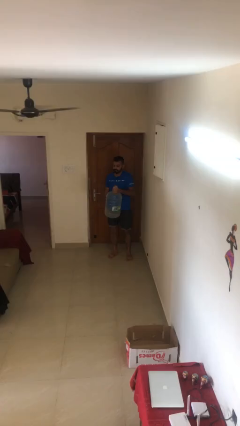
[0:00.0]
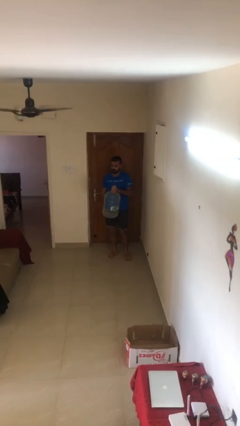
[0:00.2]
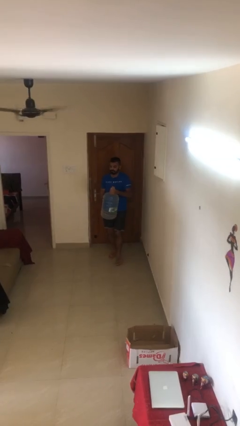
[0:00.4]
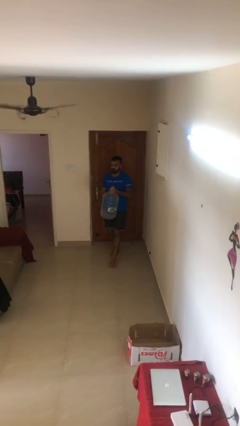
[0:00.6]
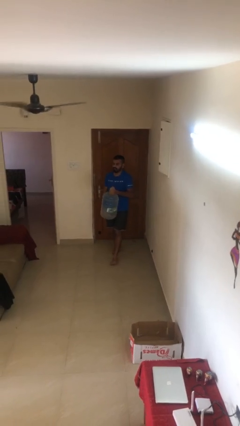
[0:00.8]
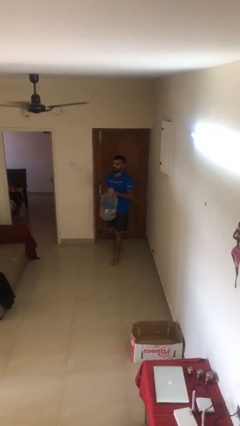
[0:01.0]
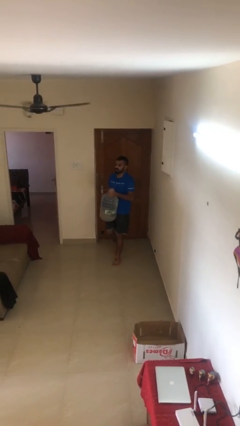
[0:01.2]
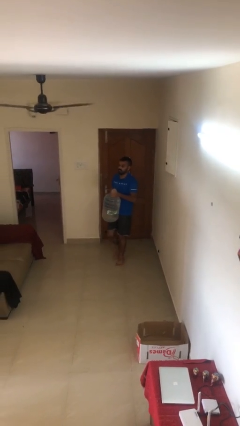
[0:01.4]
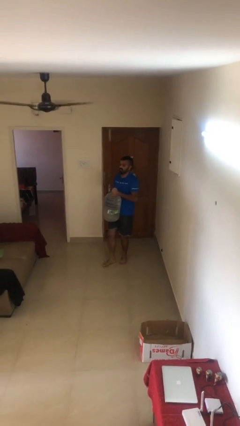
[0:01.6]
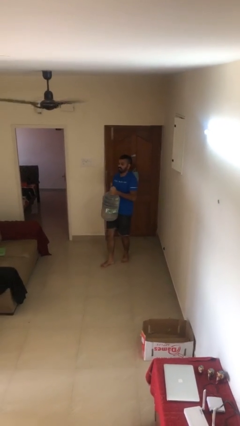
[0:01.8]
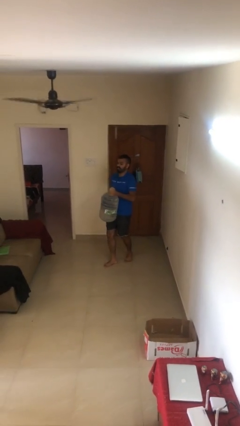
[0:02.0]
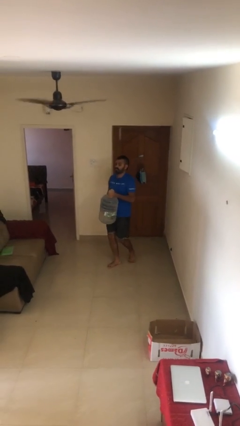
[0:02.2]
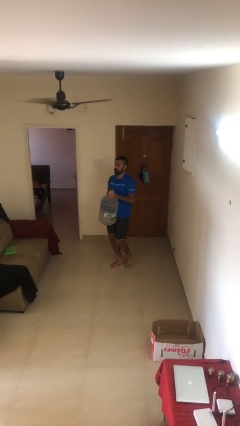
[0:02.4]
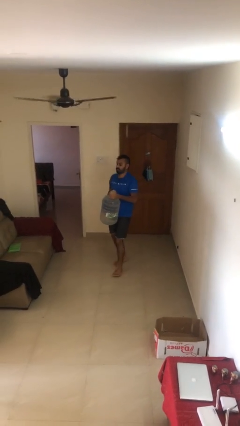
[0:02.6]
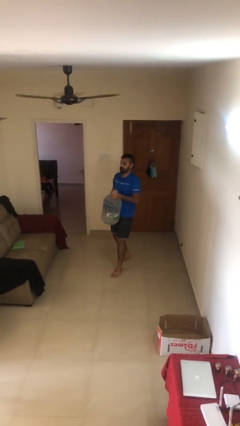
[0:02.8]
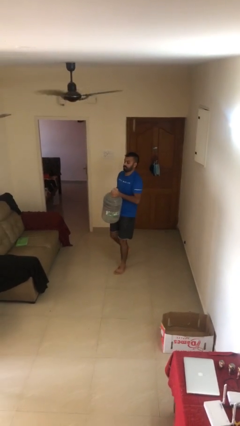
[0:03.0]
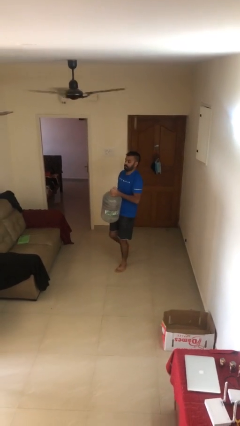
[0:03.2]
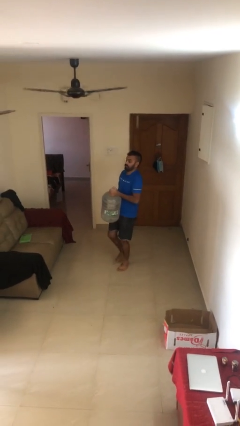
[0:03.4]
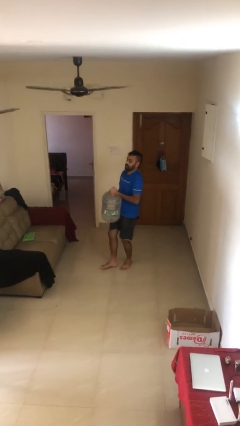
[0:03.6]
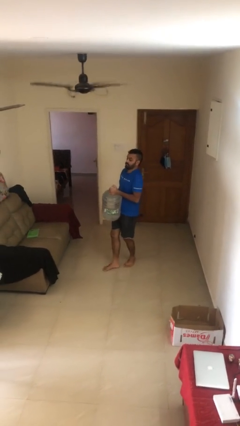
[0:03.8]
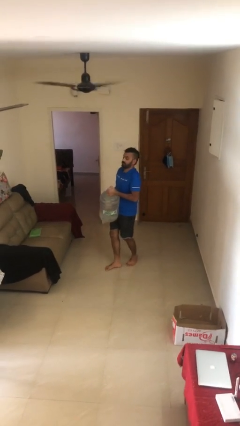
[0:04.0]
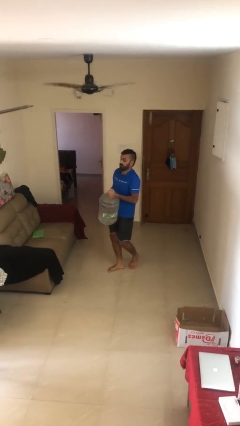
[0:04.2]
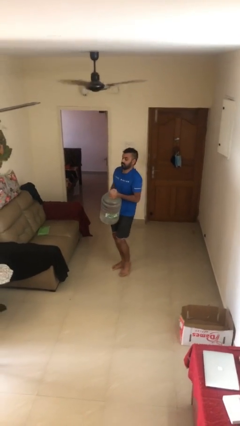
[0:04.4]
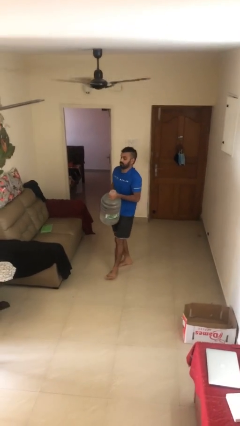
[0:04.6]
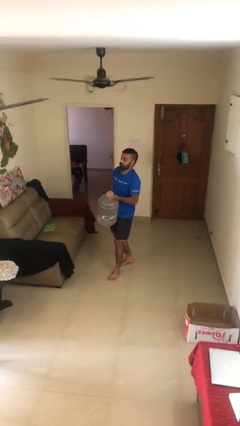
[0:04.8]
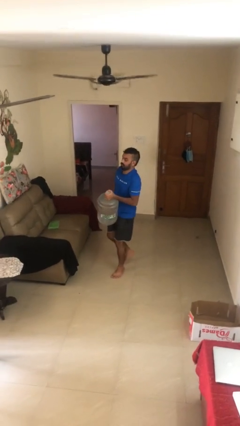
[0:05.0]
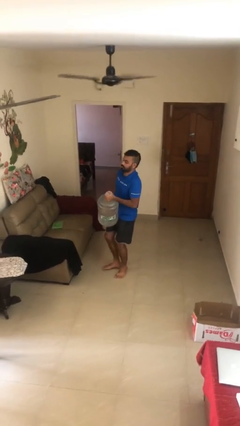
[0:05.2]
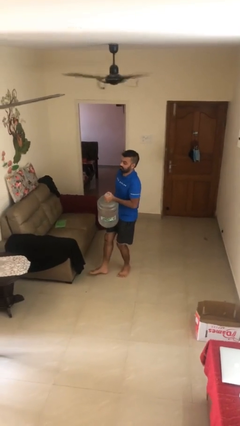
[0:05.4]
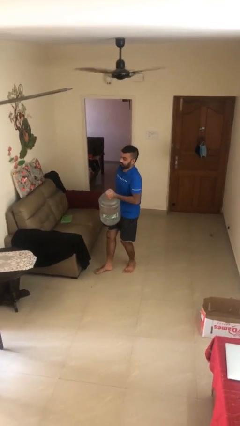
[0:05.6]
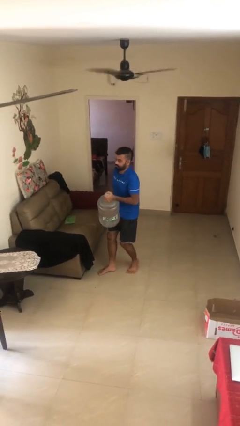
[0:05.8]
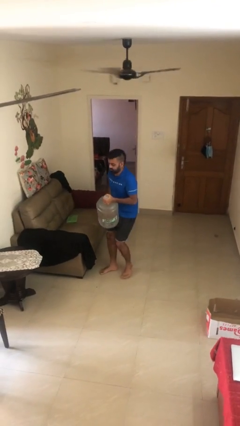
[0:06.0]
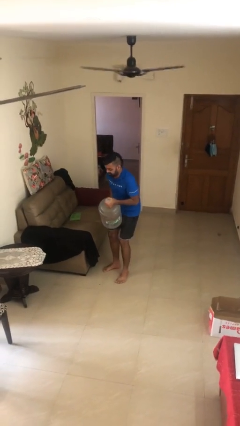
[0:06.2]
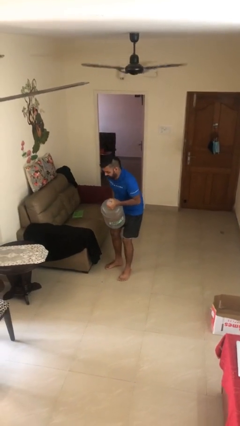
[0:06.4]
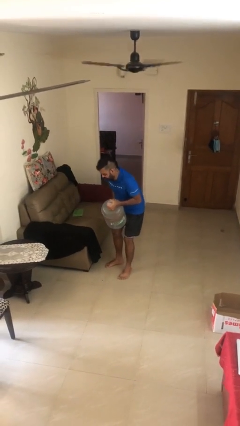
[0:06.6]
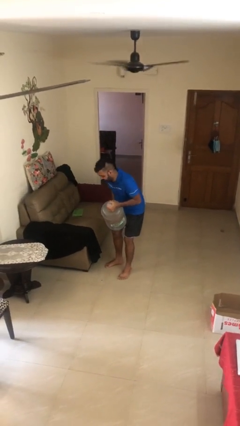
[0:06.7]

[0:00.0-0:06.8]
person carries heavy object

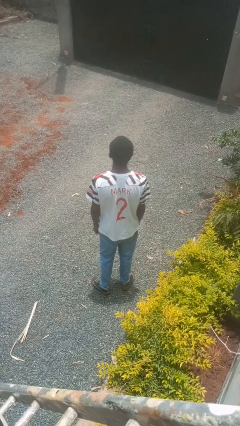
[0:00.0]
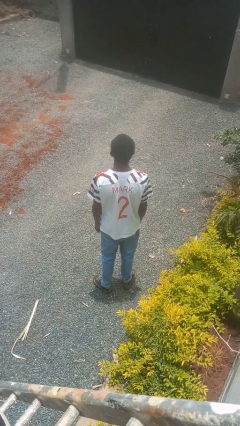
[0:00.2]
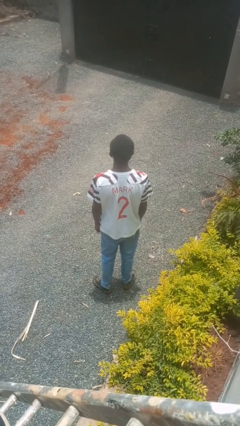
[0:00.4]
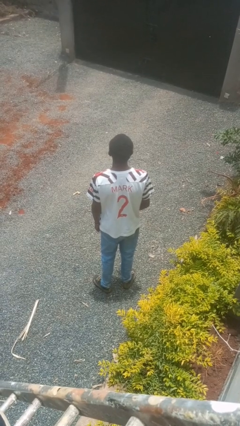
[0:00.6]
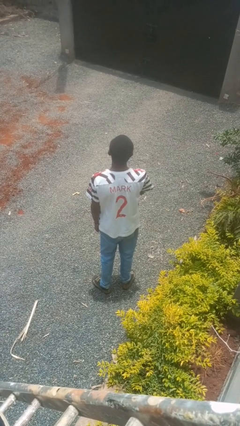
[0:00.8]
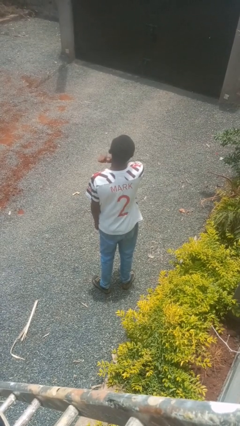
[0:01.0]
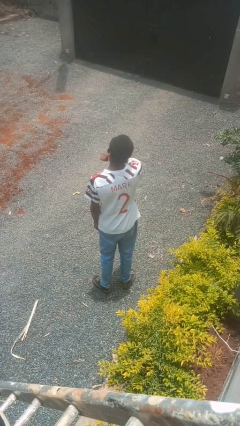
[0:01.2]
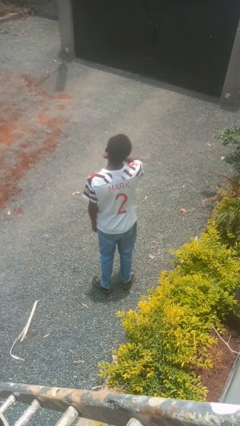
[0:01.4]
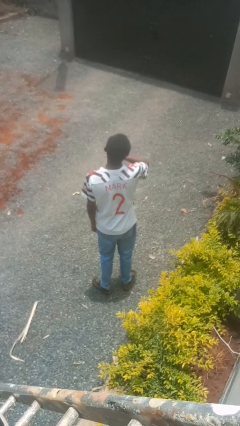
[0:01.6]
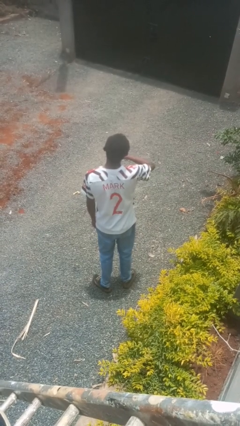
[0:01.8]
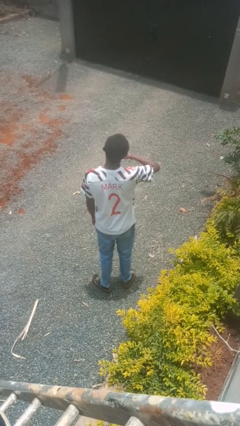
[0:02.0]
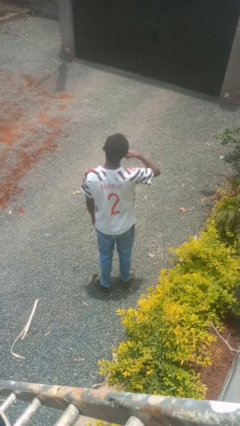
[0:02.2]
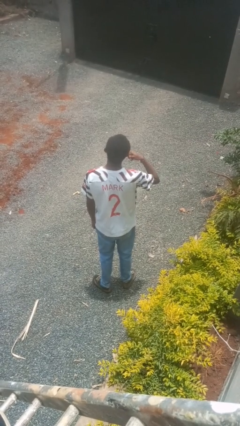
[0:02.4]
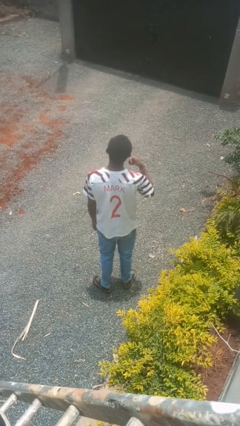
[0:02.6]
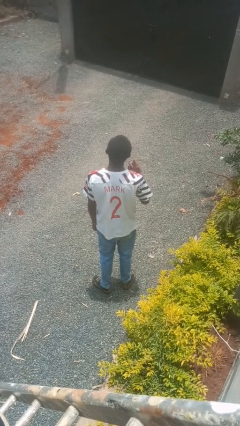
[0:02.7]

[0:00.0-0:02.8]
person gestures cut

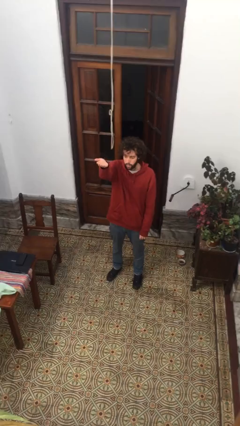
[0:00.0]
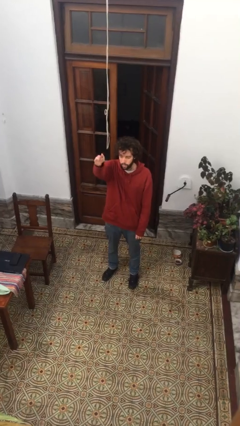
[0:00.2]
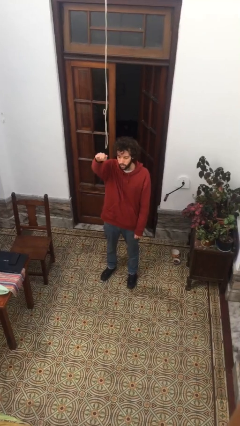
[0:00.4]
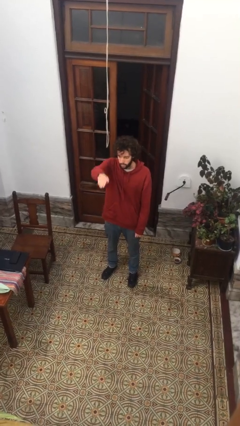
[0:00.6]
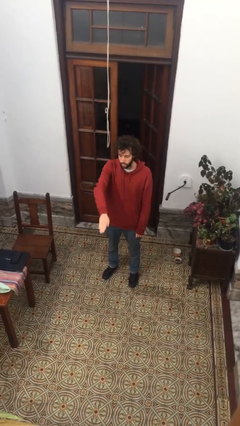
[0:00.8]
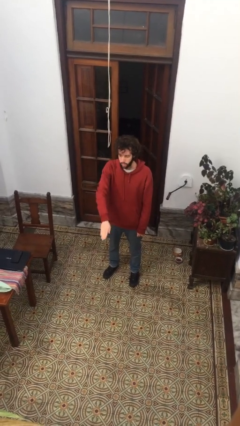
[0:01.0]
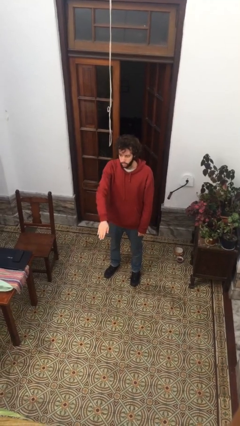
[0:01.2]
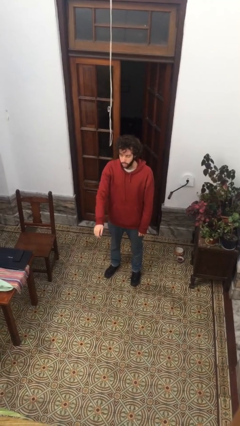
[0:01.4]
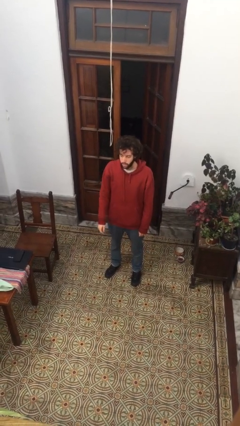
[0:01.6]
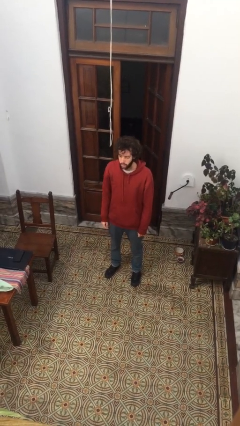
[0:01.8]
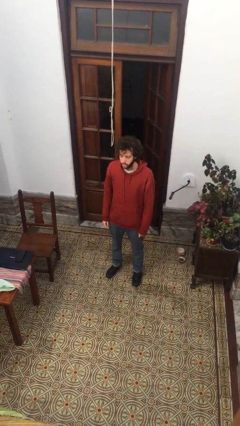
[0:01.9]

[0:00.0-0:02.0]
person gestures swipe down

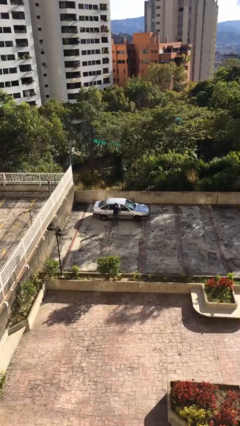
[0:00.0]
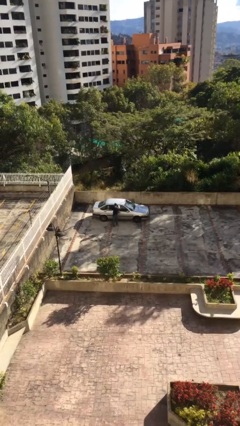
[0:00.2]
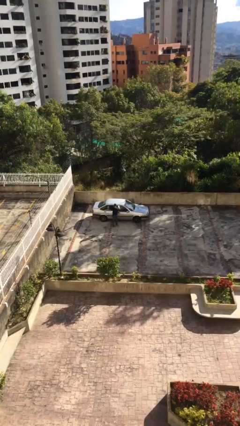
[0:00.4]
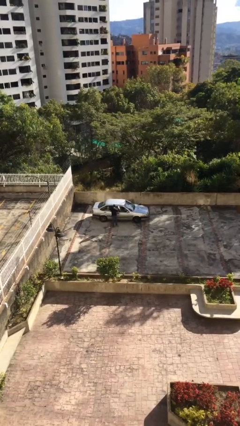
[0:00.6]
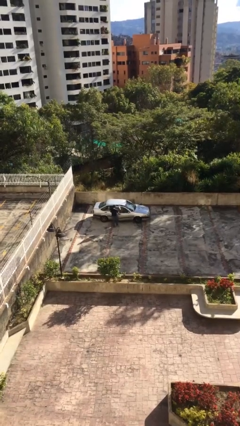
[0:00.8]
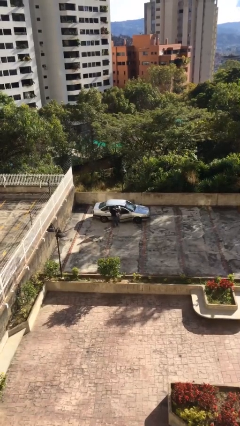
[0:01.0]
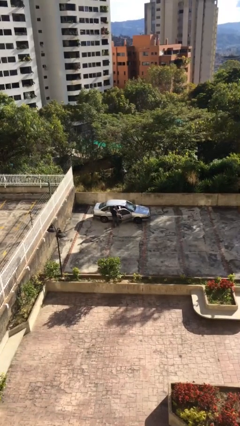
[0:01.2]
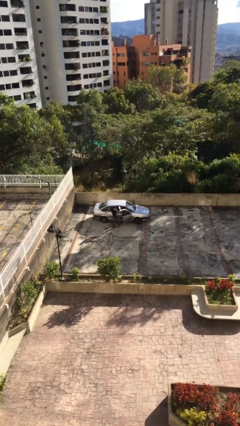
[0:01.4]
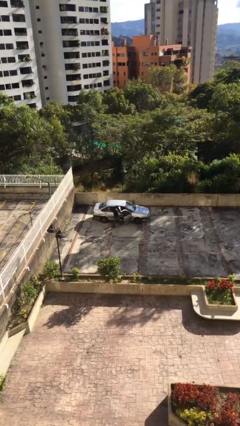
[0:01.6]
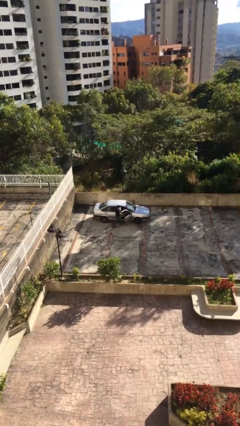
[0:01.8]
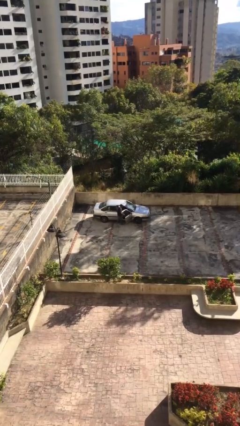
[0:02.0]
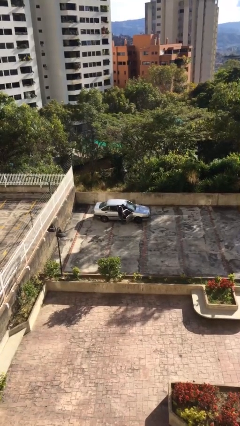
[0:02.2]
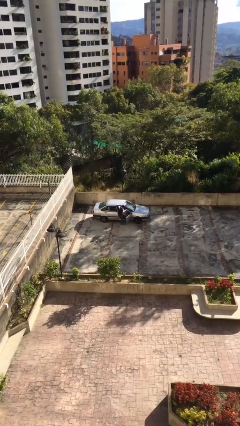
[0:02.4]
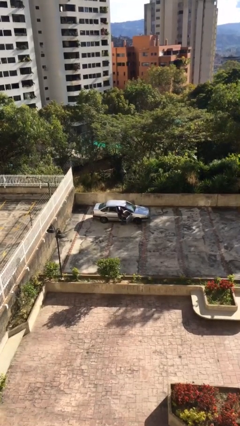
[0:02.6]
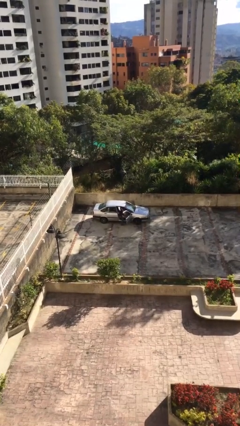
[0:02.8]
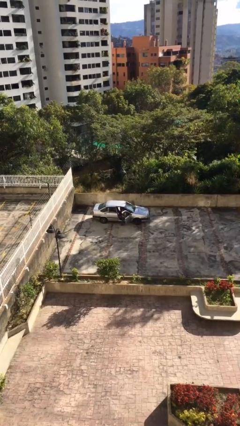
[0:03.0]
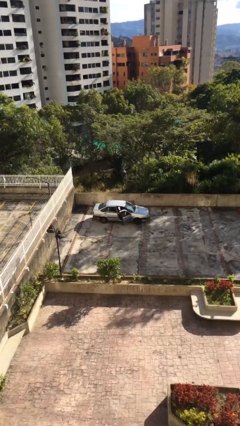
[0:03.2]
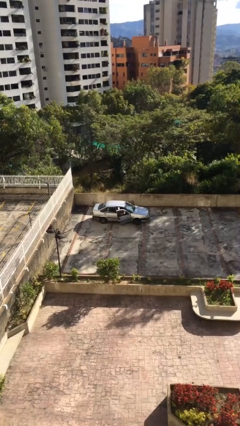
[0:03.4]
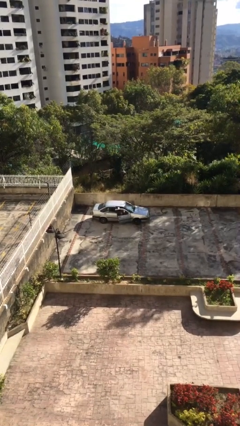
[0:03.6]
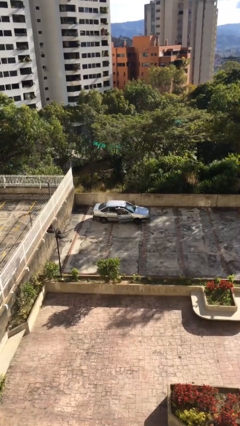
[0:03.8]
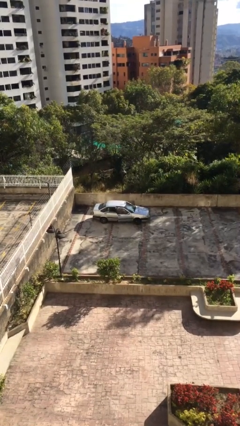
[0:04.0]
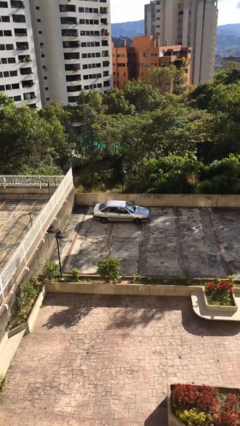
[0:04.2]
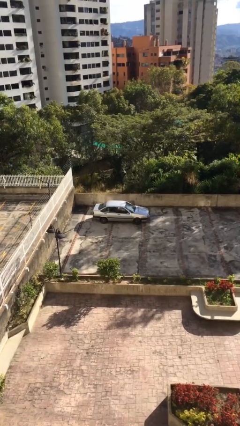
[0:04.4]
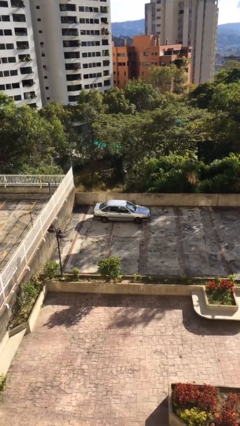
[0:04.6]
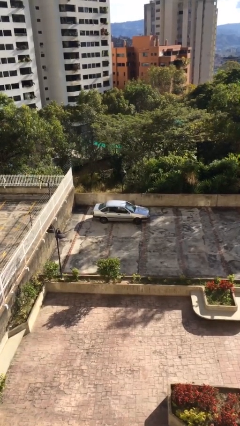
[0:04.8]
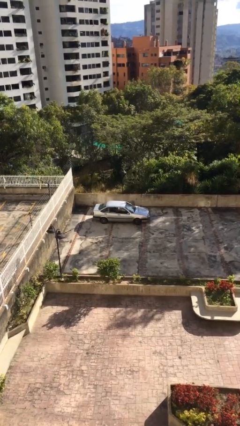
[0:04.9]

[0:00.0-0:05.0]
car picks up person

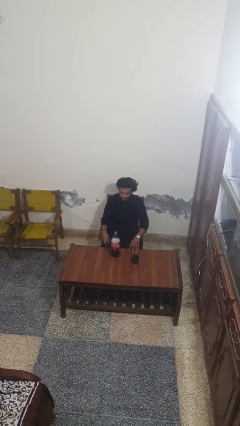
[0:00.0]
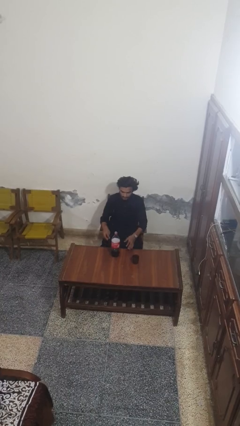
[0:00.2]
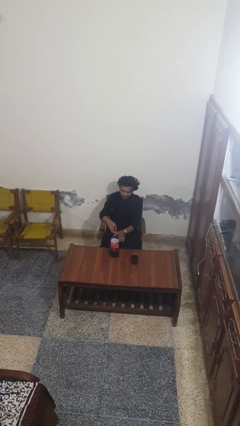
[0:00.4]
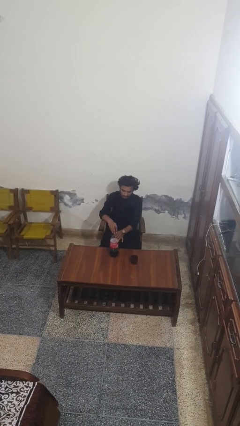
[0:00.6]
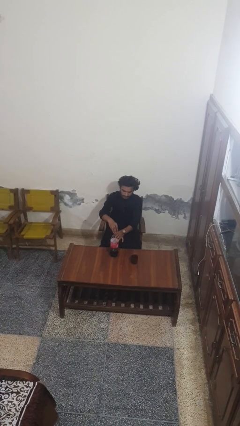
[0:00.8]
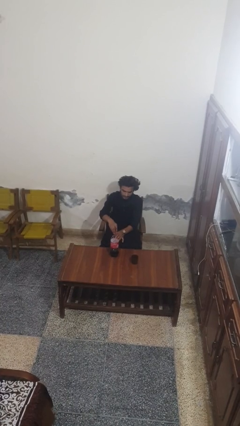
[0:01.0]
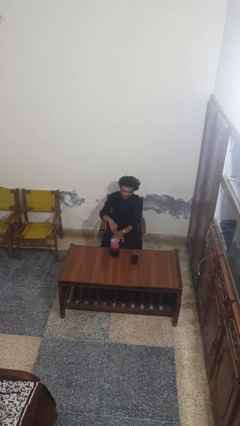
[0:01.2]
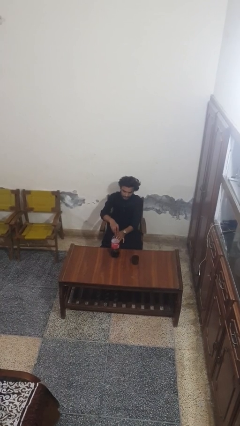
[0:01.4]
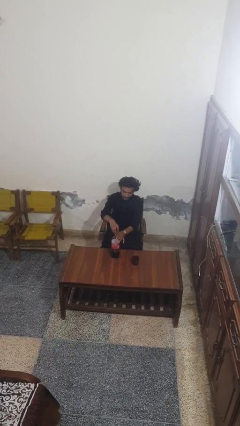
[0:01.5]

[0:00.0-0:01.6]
person screws lid to bottle
